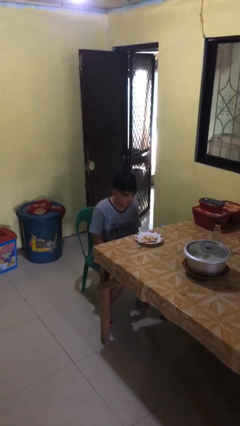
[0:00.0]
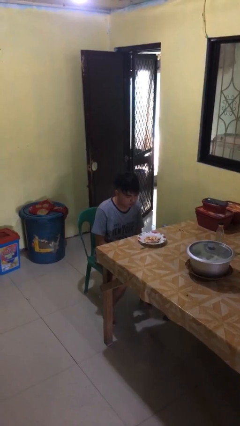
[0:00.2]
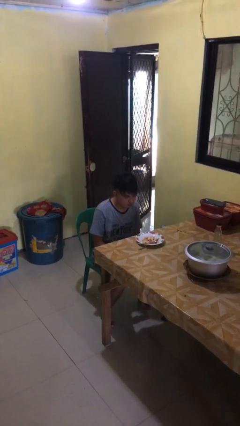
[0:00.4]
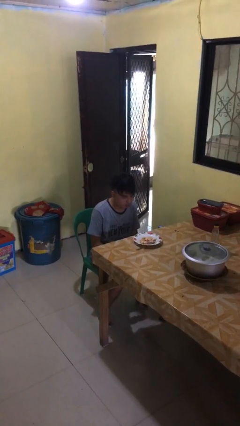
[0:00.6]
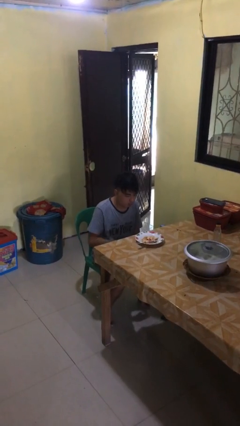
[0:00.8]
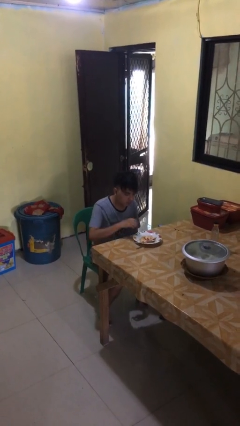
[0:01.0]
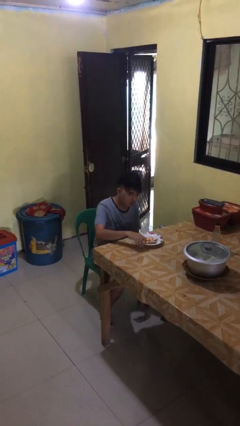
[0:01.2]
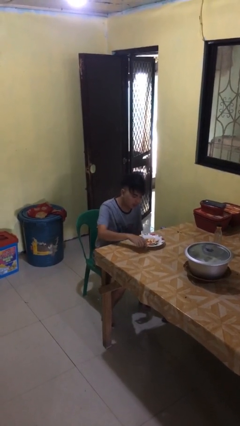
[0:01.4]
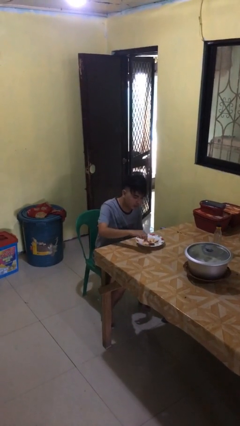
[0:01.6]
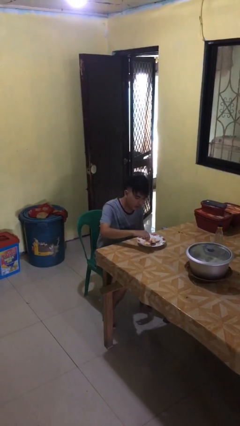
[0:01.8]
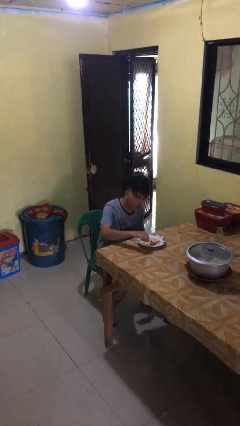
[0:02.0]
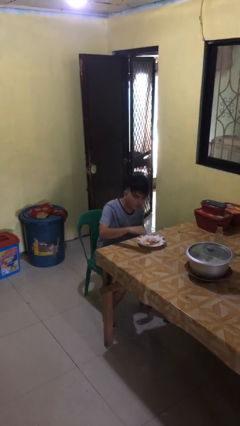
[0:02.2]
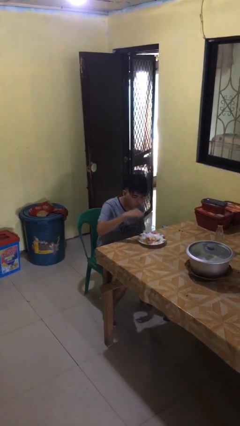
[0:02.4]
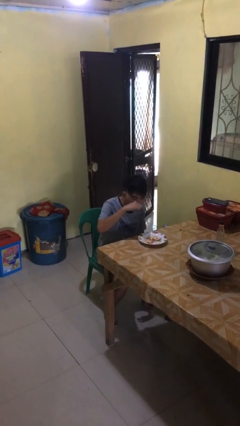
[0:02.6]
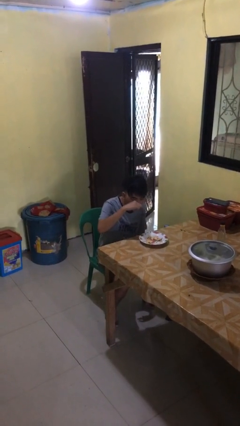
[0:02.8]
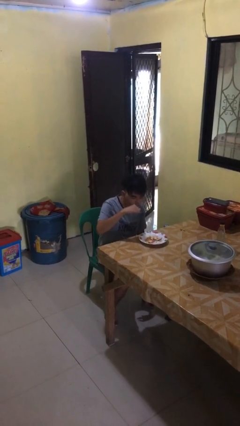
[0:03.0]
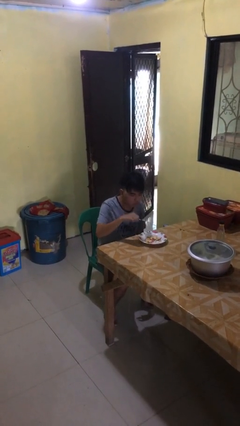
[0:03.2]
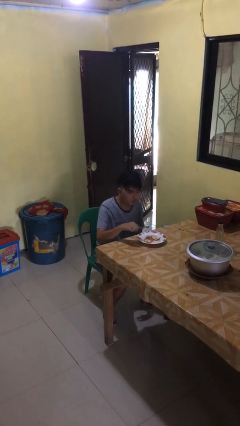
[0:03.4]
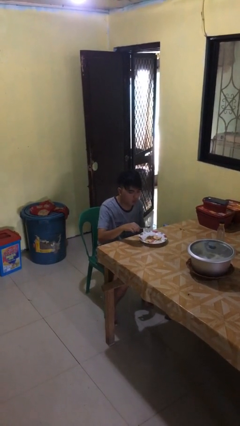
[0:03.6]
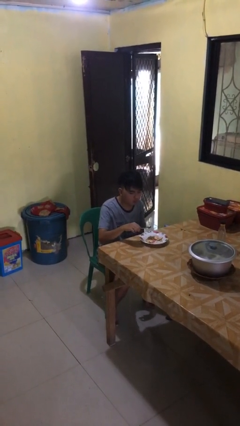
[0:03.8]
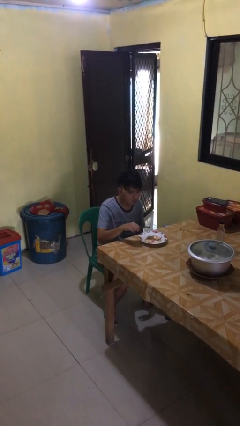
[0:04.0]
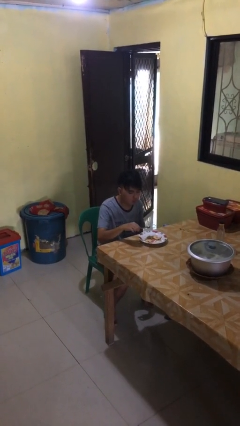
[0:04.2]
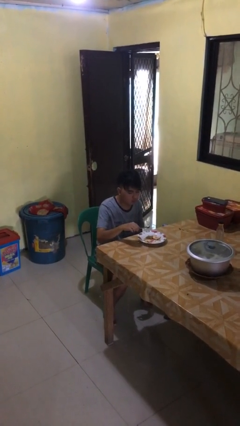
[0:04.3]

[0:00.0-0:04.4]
person eats with utensil

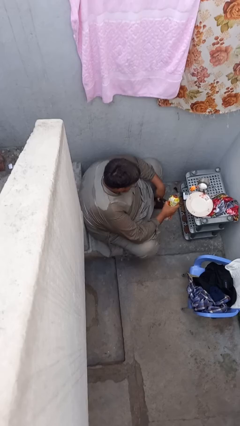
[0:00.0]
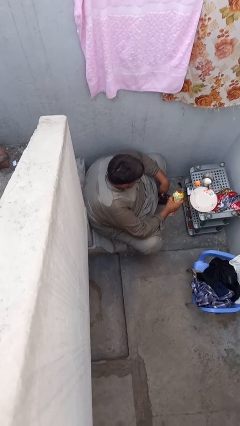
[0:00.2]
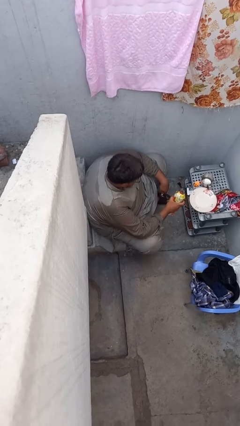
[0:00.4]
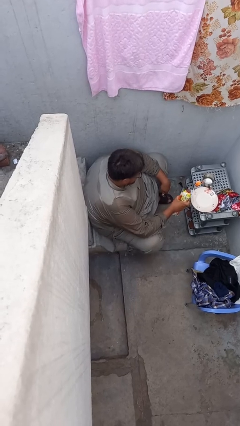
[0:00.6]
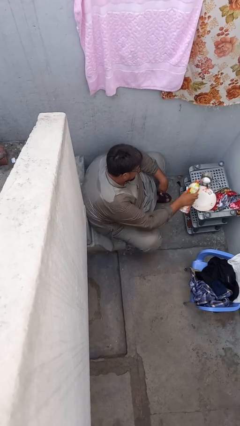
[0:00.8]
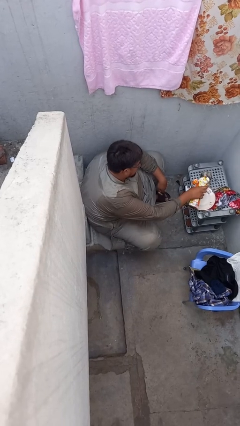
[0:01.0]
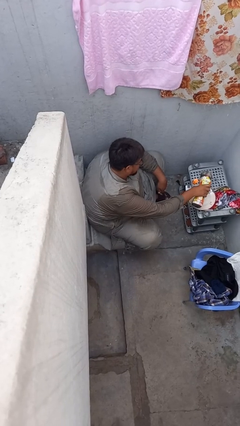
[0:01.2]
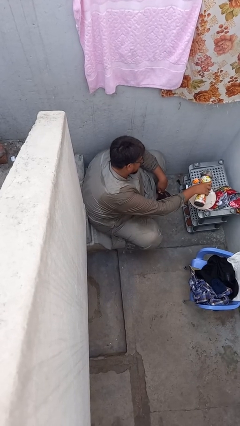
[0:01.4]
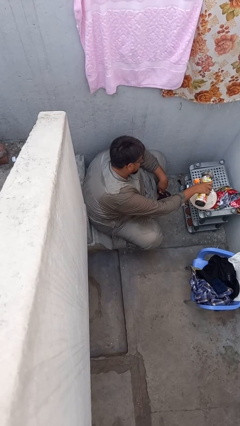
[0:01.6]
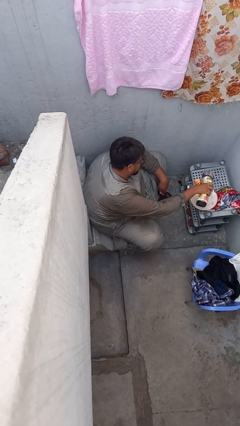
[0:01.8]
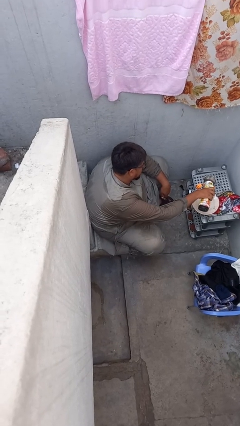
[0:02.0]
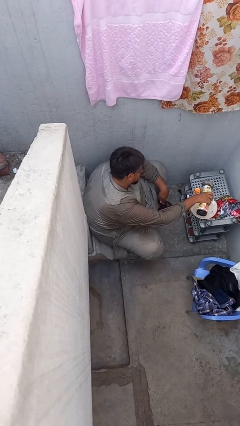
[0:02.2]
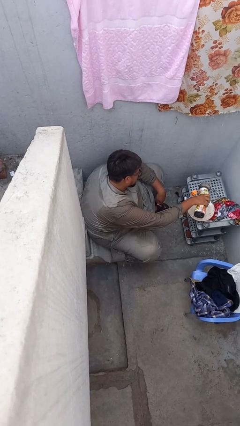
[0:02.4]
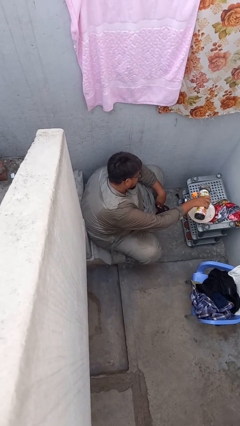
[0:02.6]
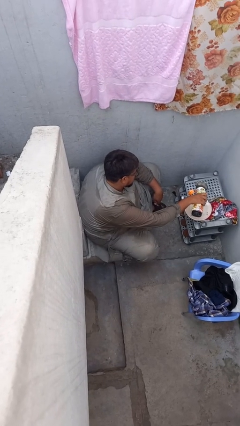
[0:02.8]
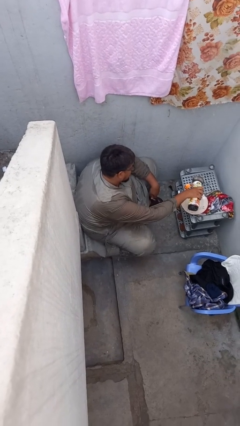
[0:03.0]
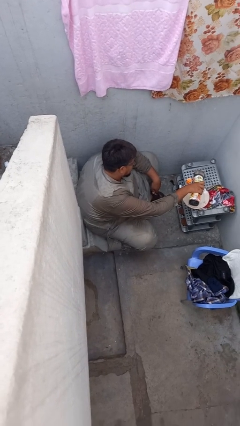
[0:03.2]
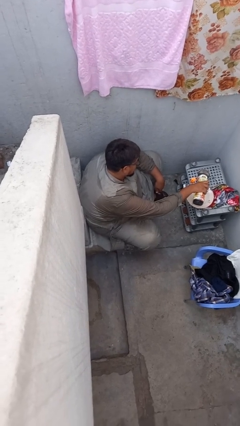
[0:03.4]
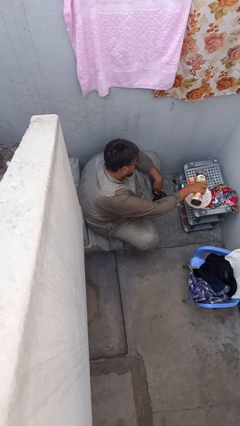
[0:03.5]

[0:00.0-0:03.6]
person pours liquid into cup

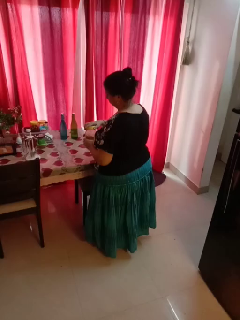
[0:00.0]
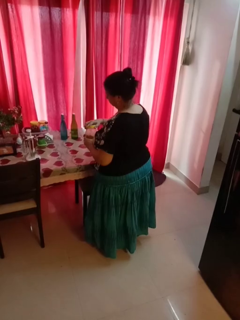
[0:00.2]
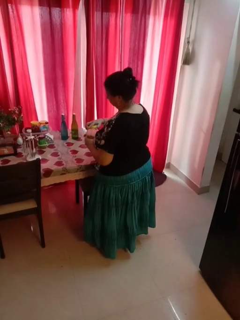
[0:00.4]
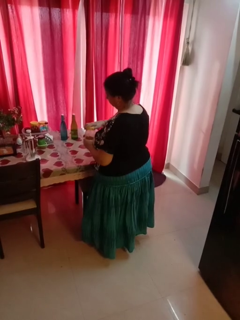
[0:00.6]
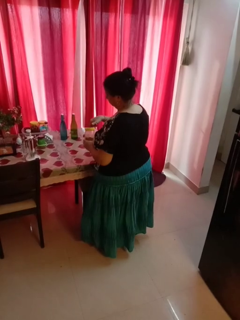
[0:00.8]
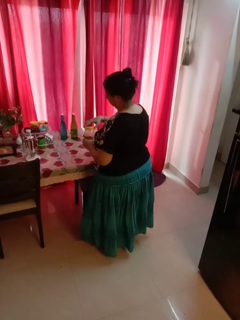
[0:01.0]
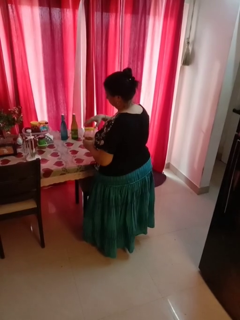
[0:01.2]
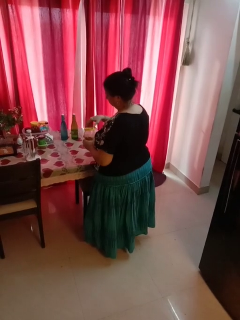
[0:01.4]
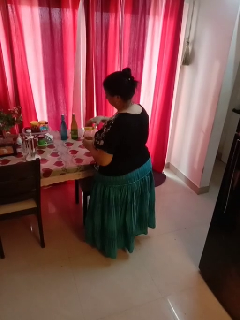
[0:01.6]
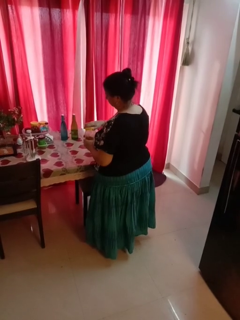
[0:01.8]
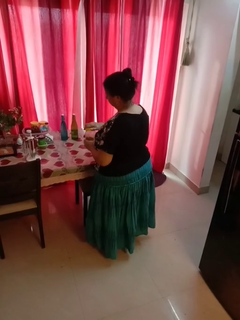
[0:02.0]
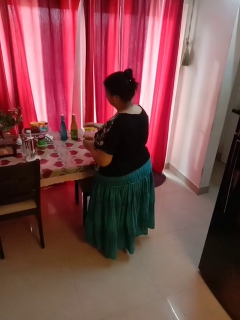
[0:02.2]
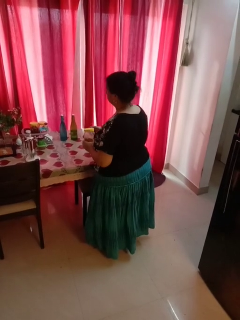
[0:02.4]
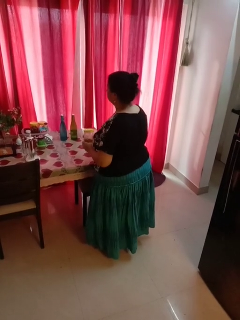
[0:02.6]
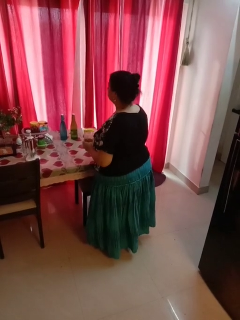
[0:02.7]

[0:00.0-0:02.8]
person closes jar

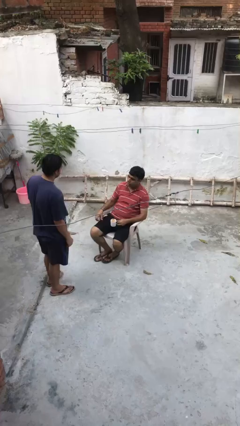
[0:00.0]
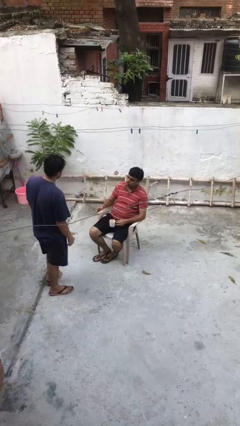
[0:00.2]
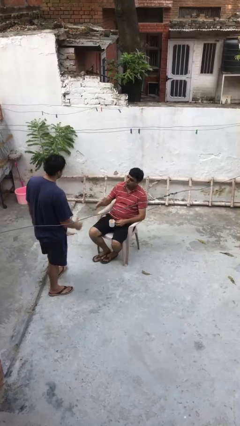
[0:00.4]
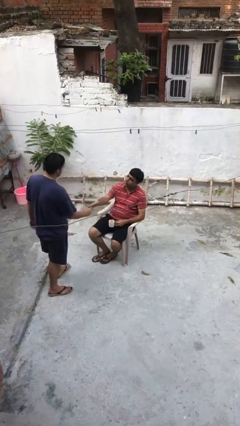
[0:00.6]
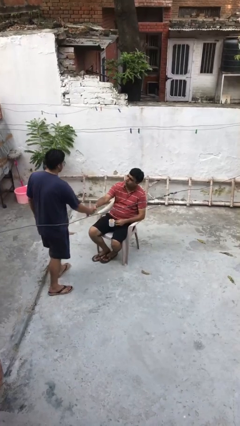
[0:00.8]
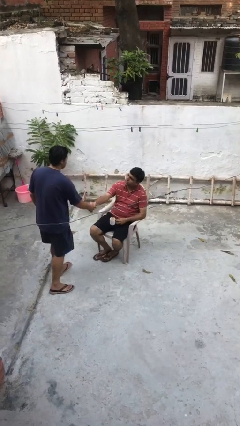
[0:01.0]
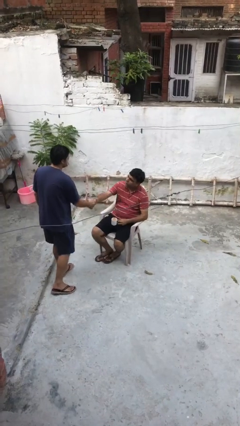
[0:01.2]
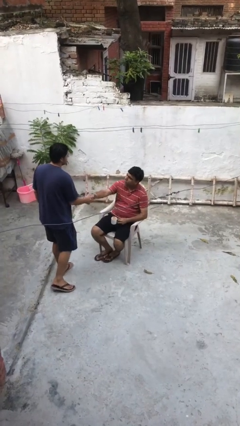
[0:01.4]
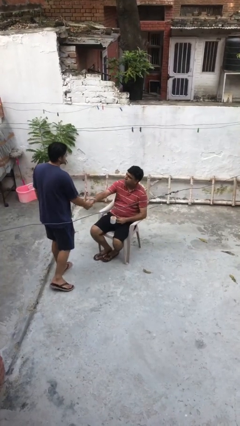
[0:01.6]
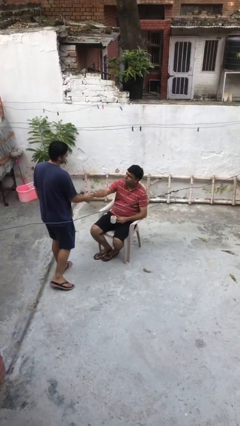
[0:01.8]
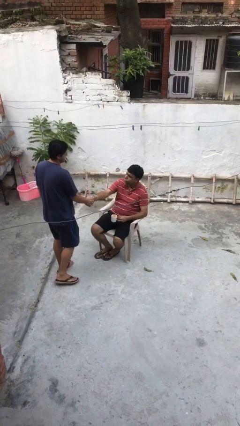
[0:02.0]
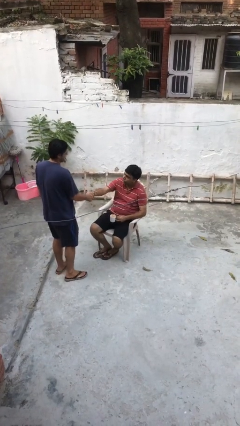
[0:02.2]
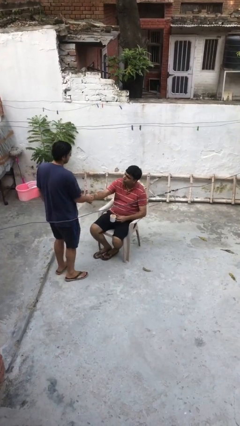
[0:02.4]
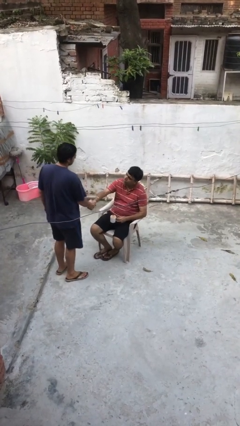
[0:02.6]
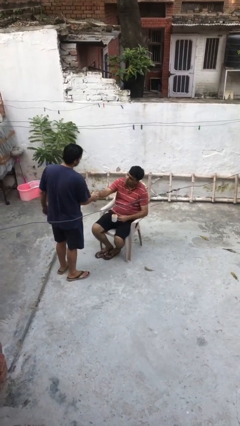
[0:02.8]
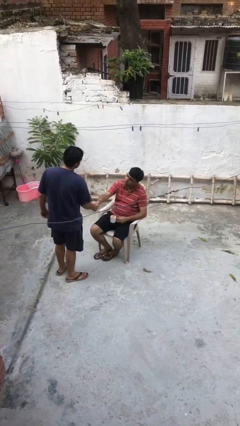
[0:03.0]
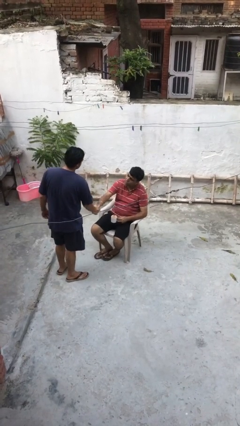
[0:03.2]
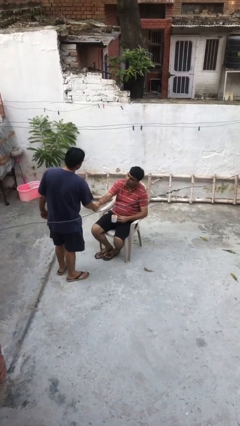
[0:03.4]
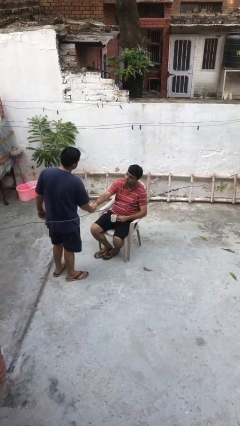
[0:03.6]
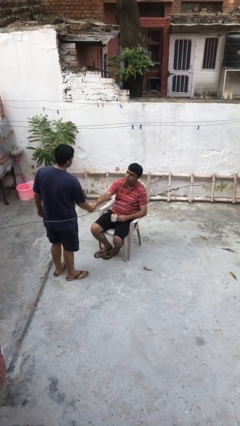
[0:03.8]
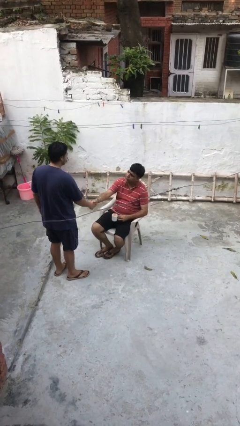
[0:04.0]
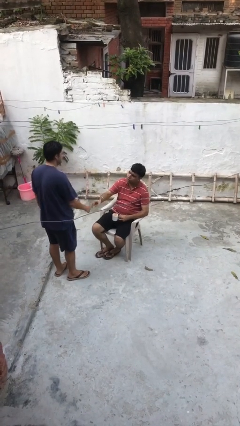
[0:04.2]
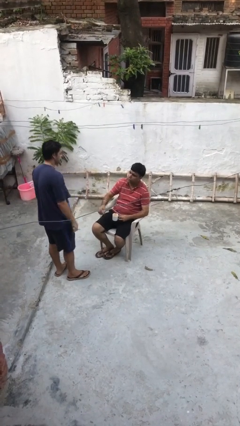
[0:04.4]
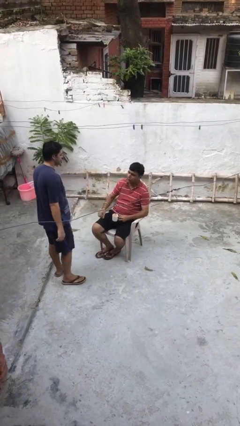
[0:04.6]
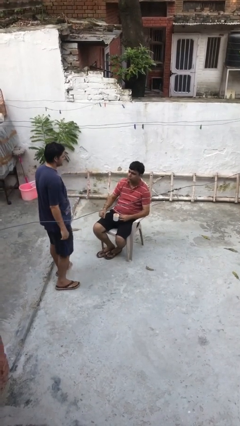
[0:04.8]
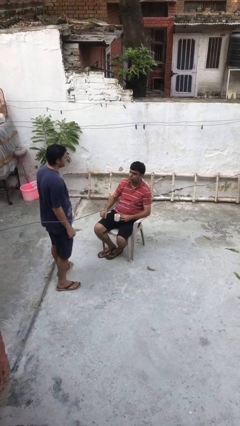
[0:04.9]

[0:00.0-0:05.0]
person shakes hand

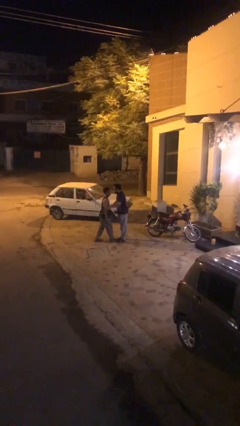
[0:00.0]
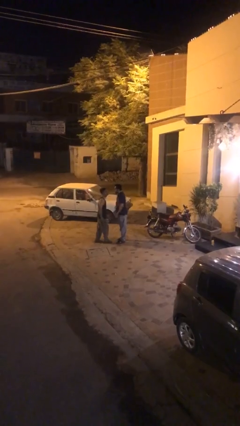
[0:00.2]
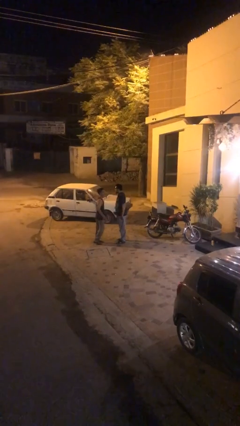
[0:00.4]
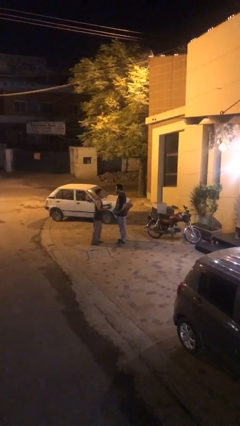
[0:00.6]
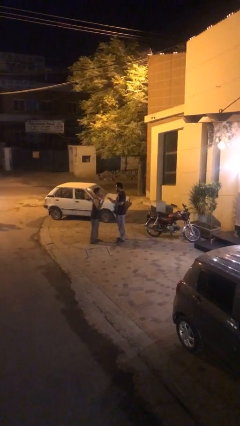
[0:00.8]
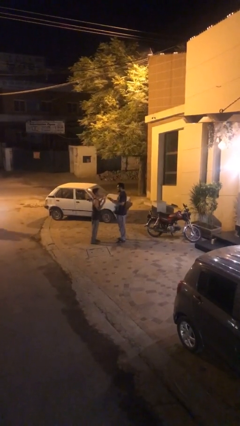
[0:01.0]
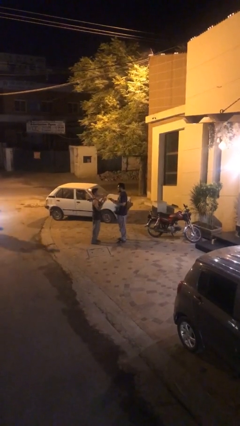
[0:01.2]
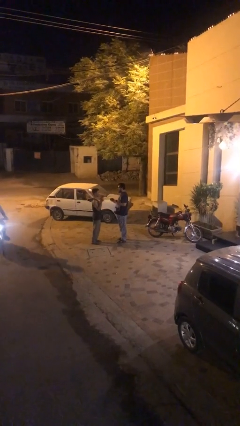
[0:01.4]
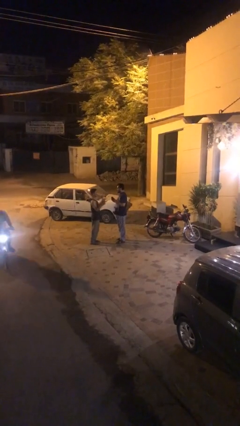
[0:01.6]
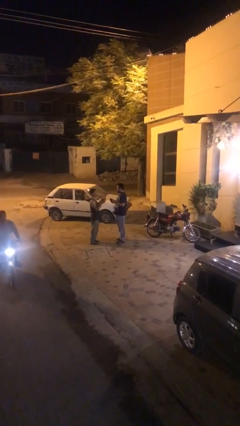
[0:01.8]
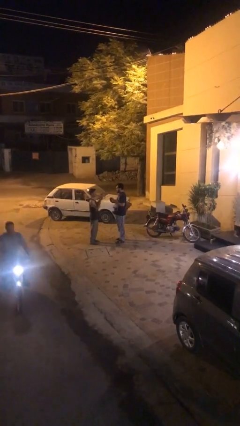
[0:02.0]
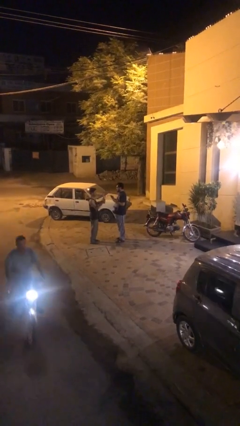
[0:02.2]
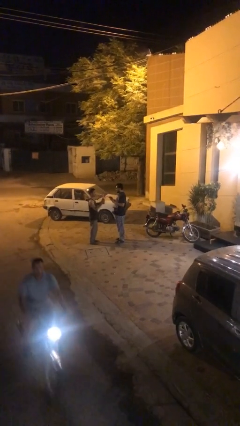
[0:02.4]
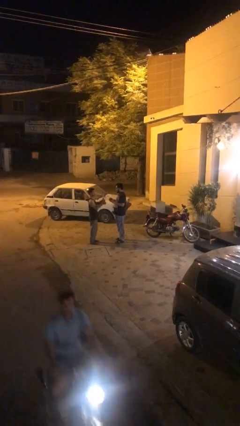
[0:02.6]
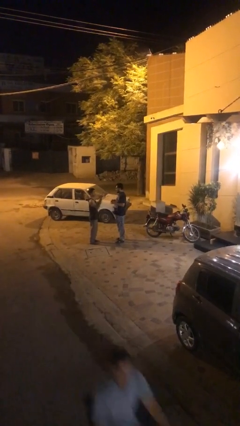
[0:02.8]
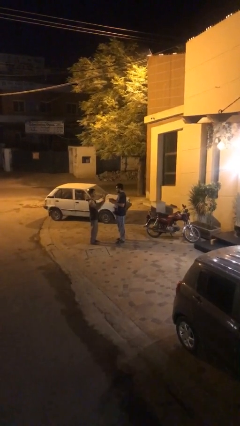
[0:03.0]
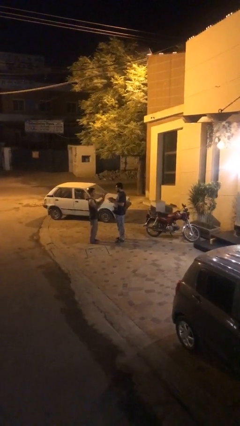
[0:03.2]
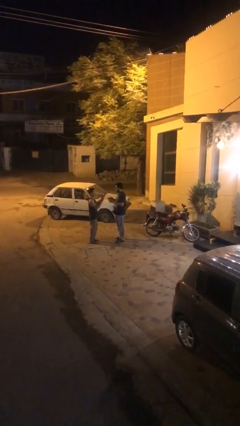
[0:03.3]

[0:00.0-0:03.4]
person talks to person
